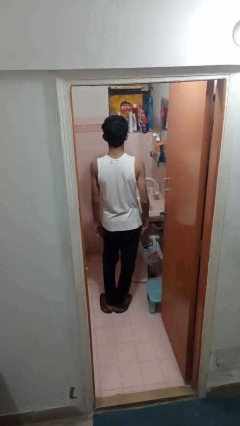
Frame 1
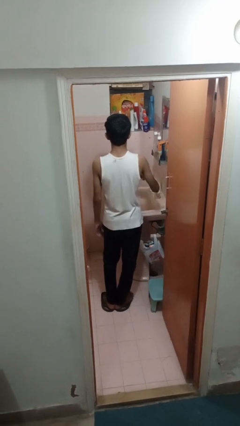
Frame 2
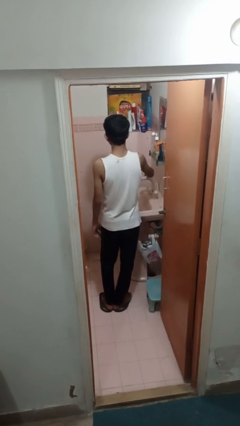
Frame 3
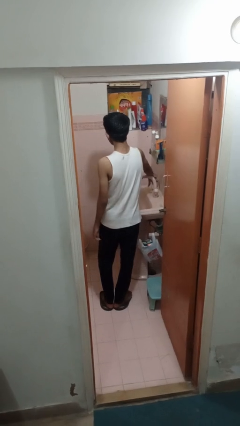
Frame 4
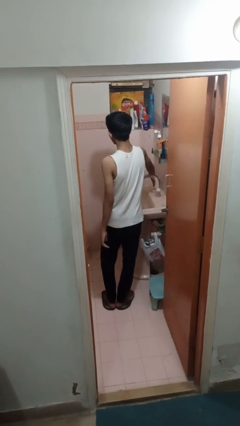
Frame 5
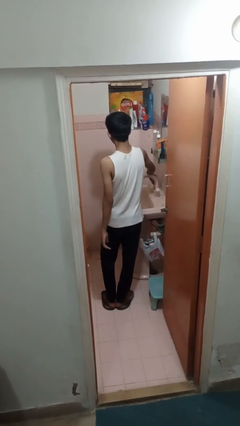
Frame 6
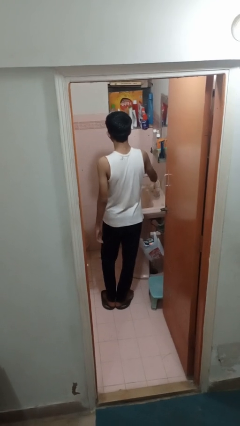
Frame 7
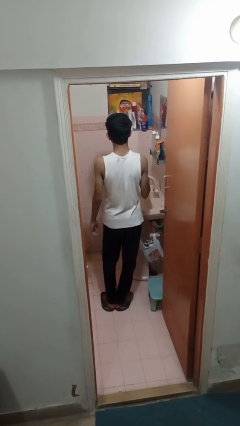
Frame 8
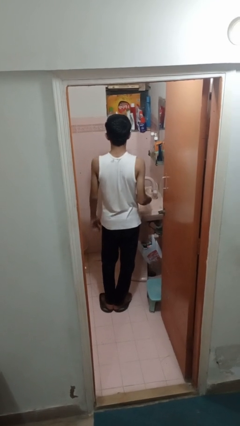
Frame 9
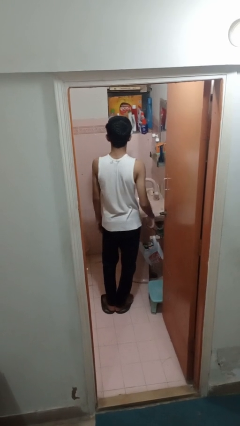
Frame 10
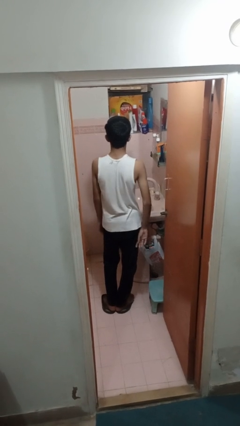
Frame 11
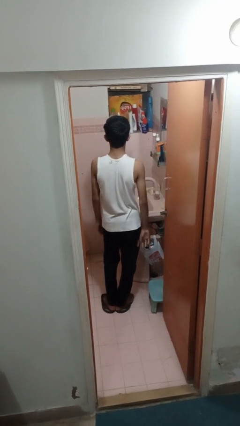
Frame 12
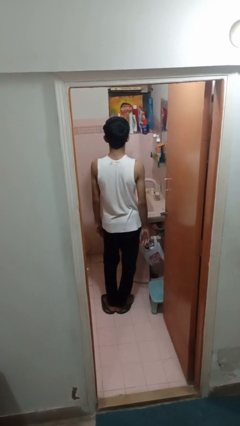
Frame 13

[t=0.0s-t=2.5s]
person turns on faucet

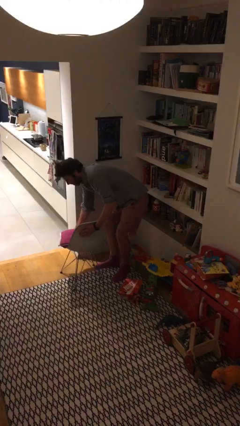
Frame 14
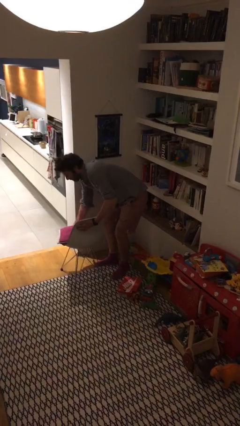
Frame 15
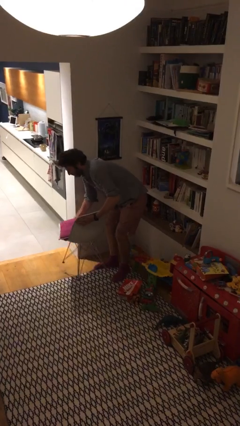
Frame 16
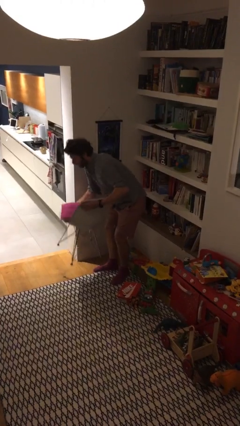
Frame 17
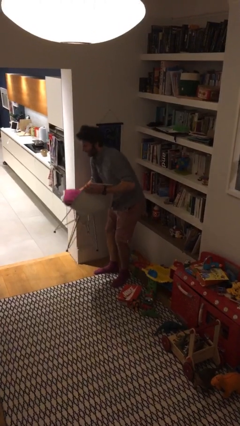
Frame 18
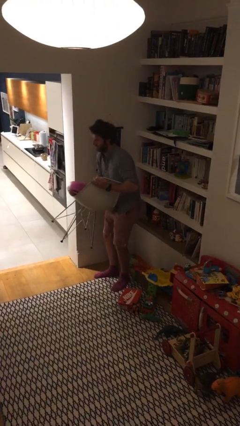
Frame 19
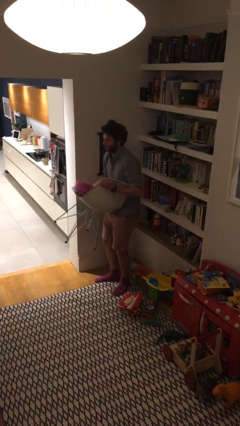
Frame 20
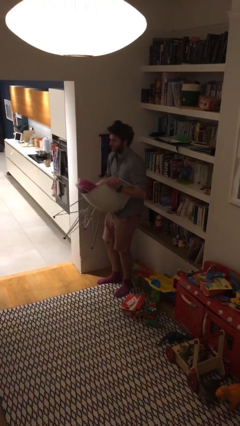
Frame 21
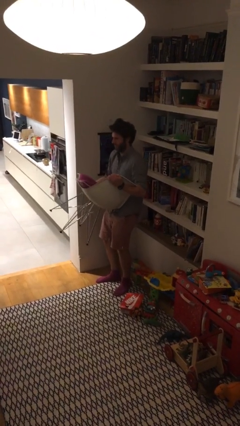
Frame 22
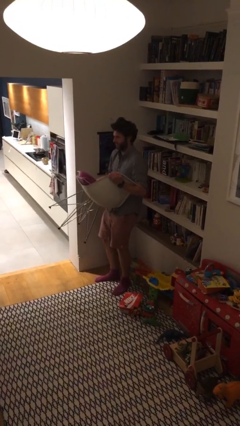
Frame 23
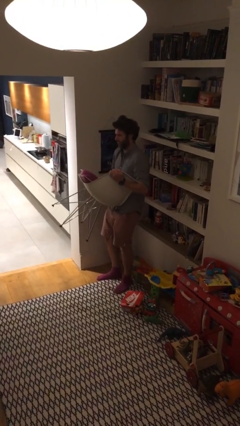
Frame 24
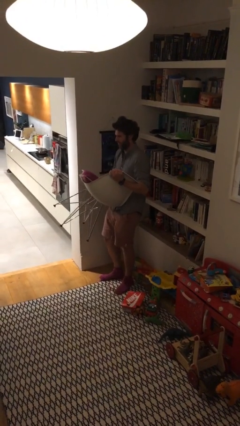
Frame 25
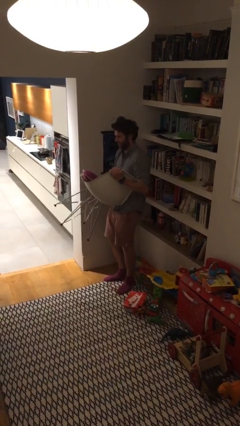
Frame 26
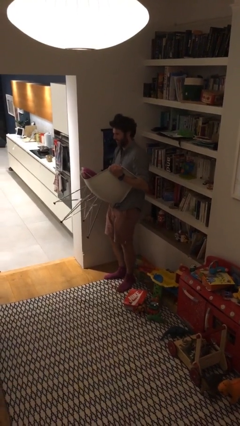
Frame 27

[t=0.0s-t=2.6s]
person picks up object from floor

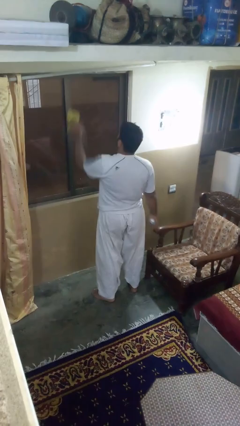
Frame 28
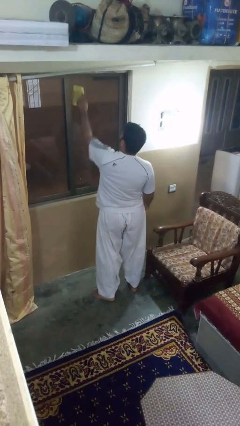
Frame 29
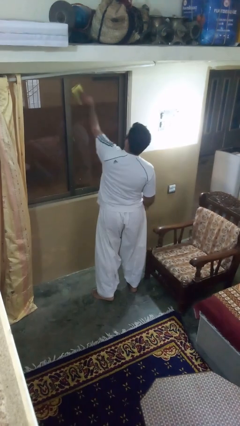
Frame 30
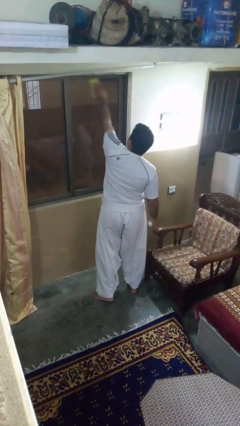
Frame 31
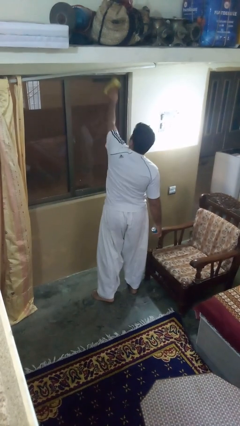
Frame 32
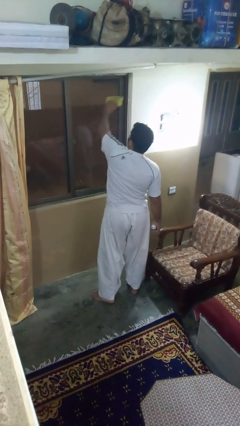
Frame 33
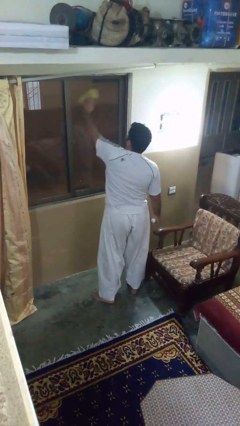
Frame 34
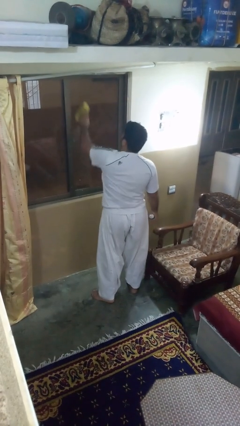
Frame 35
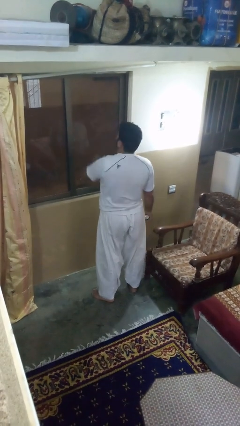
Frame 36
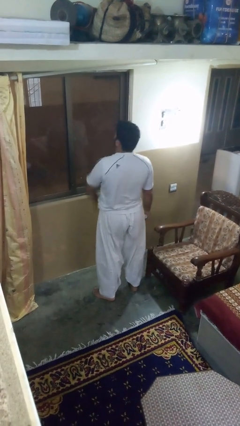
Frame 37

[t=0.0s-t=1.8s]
person washes window

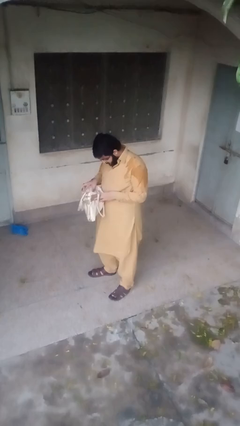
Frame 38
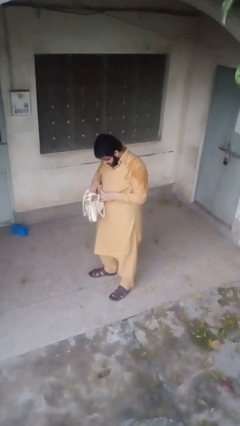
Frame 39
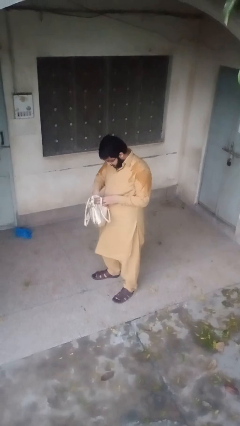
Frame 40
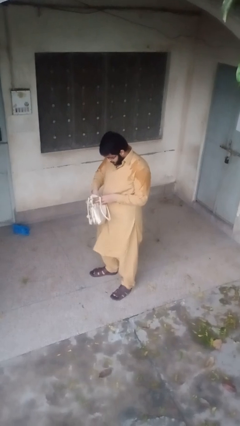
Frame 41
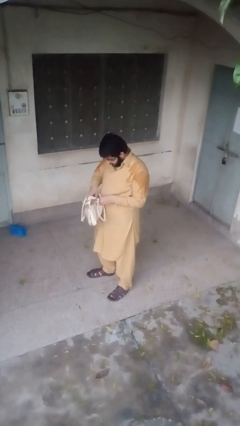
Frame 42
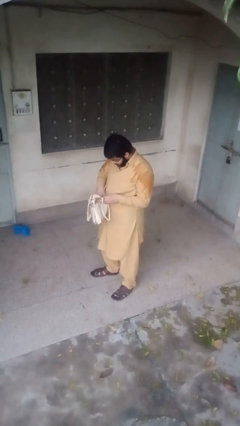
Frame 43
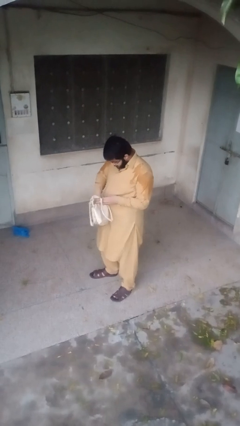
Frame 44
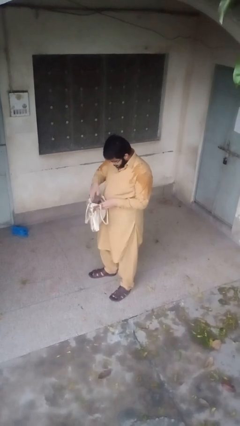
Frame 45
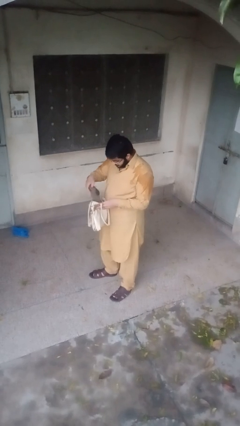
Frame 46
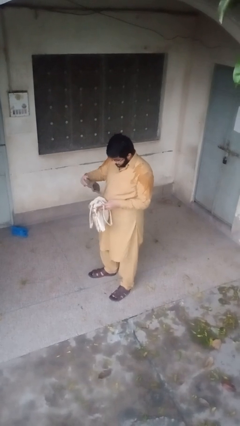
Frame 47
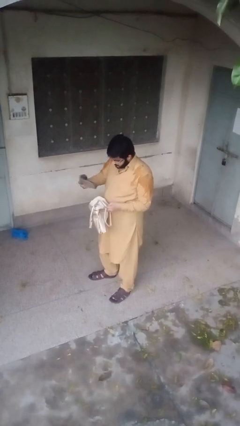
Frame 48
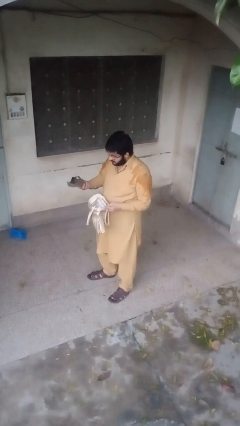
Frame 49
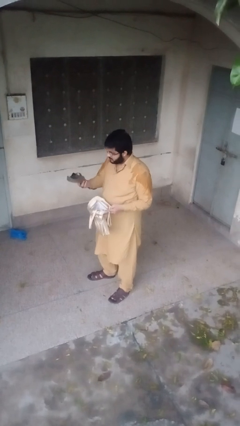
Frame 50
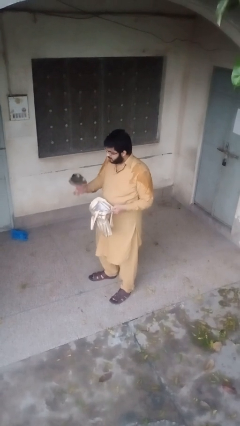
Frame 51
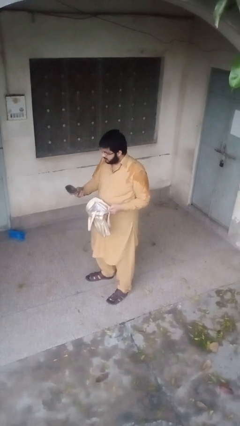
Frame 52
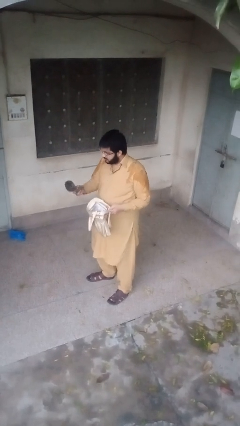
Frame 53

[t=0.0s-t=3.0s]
person takes object from purse

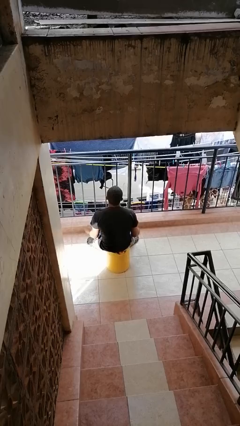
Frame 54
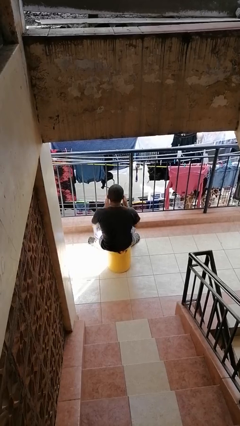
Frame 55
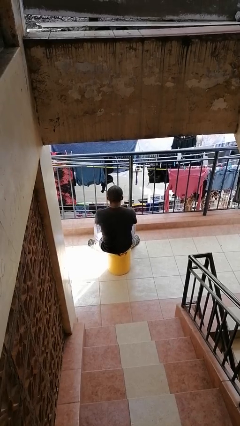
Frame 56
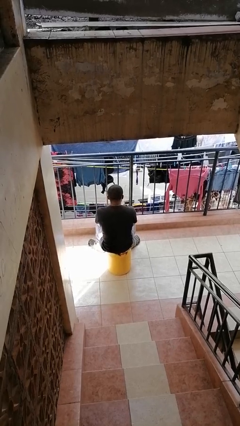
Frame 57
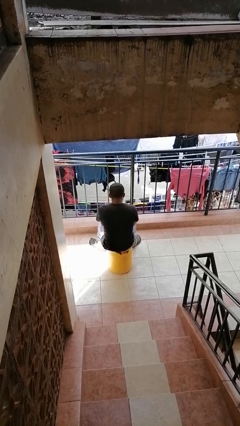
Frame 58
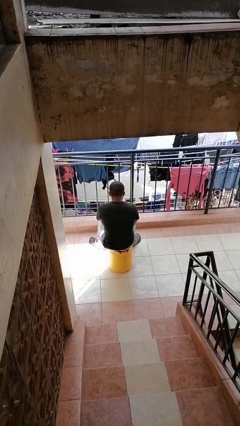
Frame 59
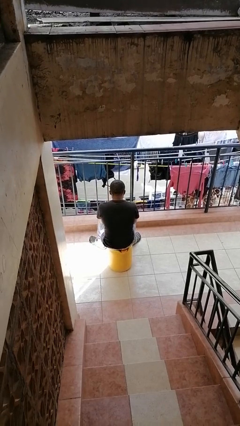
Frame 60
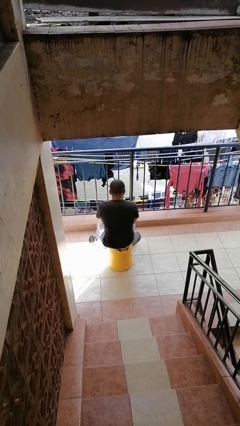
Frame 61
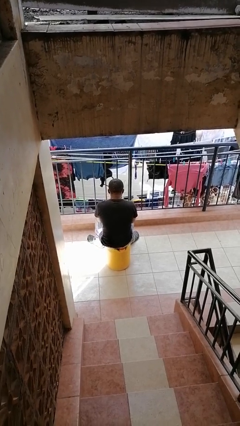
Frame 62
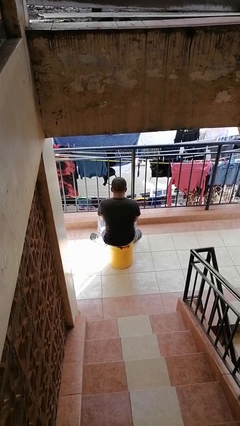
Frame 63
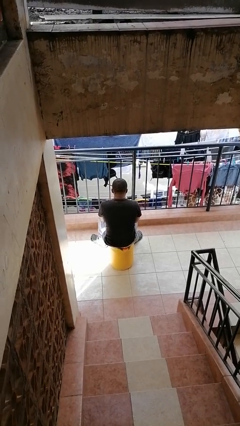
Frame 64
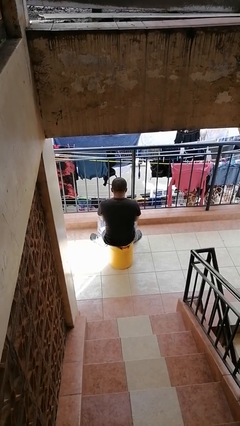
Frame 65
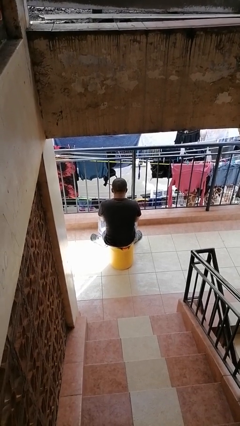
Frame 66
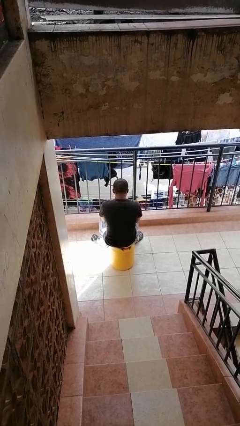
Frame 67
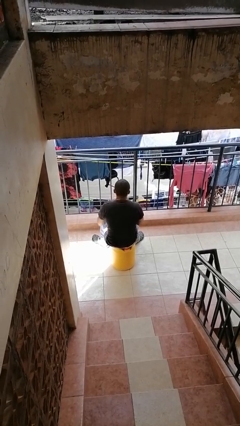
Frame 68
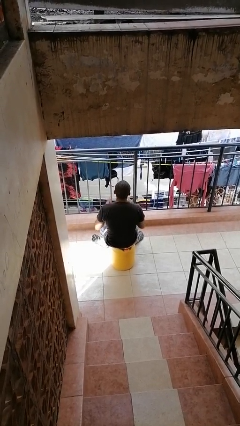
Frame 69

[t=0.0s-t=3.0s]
person blows into hands

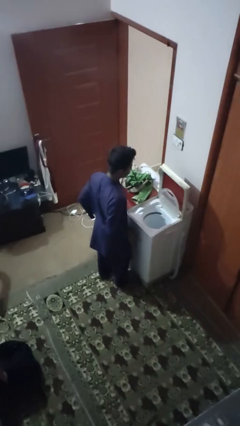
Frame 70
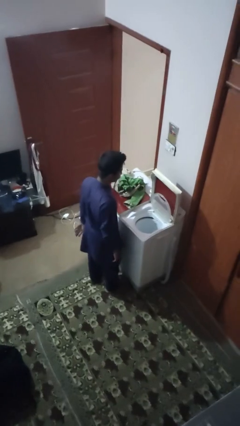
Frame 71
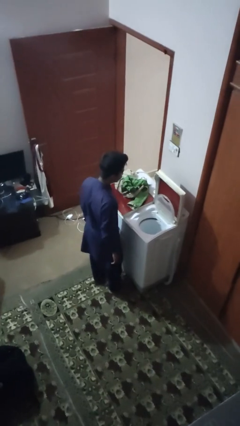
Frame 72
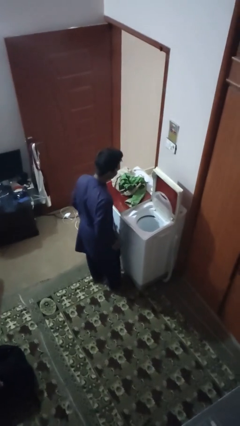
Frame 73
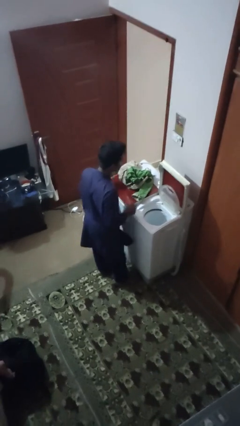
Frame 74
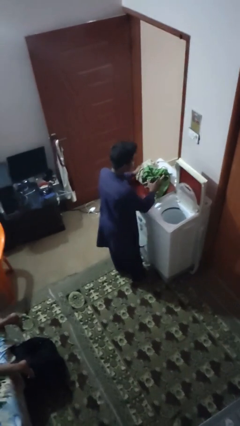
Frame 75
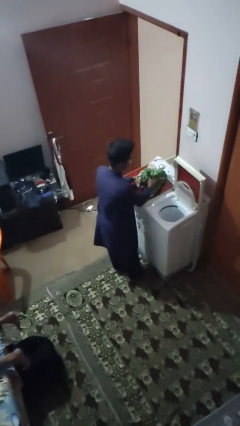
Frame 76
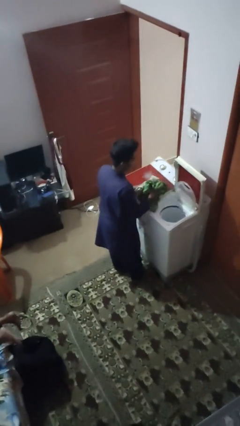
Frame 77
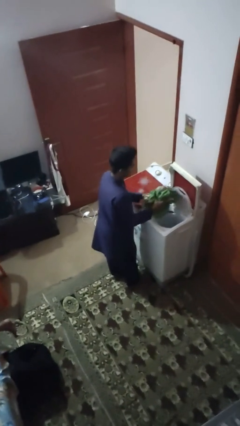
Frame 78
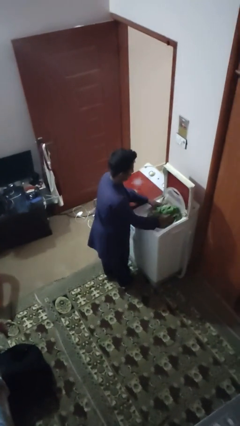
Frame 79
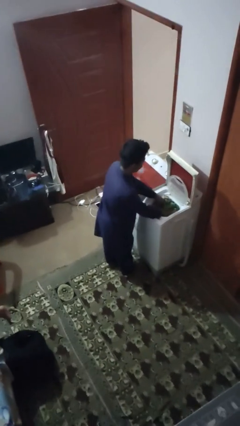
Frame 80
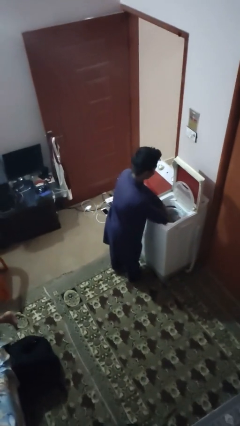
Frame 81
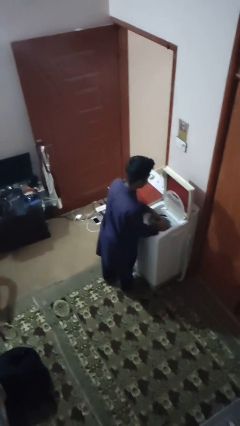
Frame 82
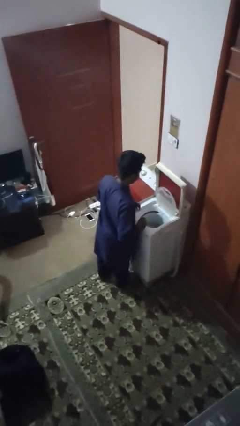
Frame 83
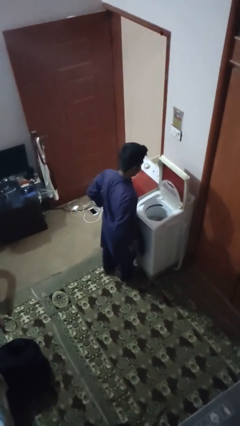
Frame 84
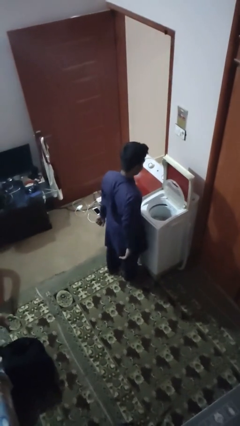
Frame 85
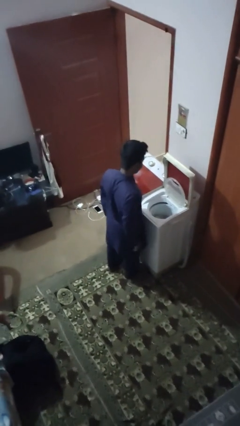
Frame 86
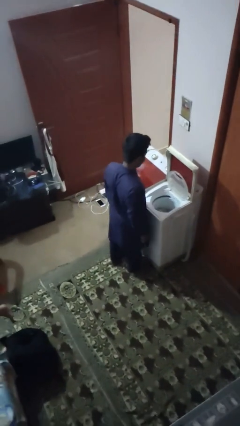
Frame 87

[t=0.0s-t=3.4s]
person loads dryer

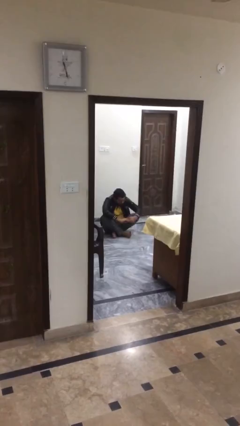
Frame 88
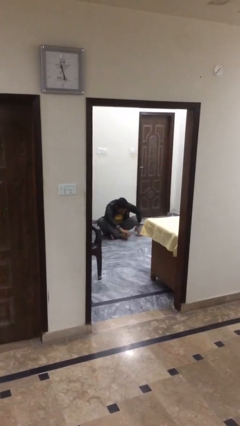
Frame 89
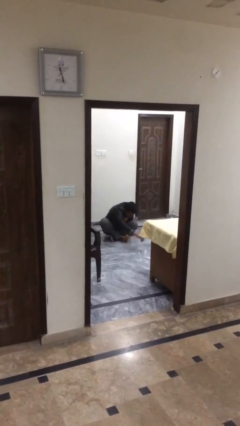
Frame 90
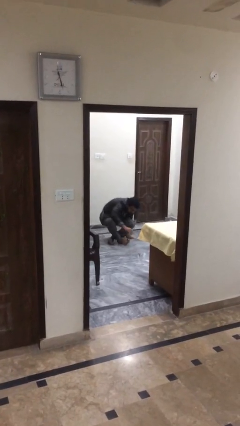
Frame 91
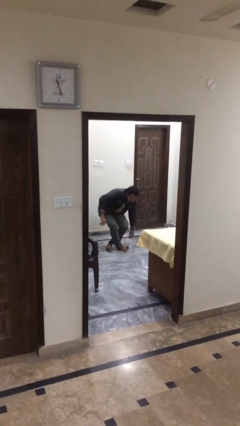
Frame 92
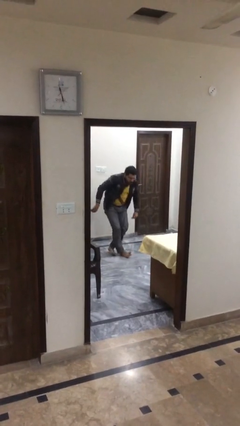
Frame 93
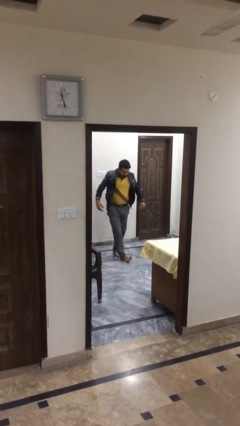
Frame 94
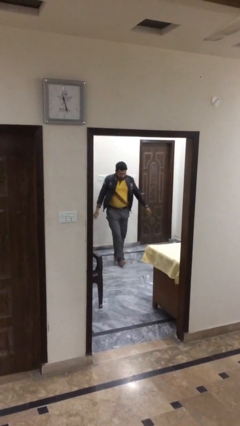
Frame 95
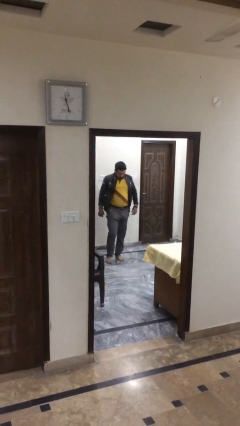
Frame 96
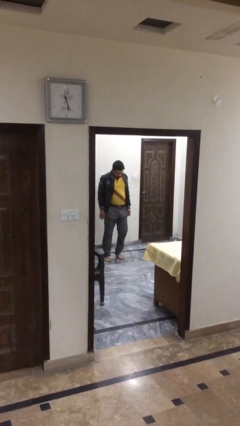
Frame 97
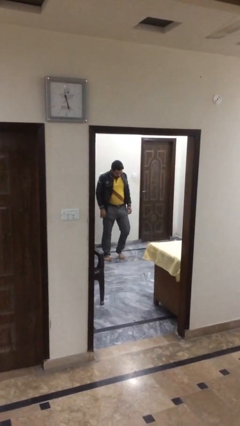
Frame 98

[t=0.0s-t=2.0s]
person stands up
